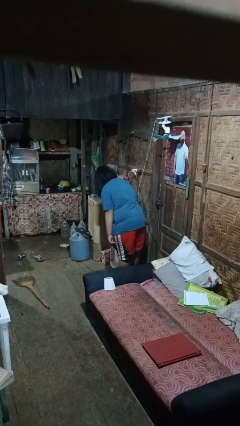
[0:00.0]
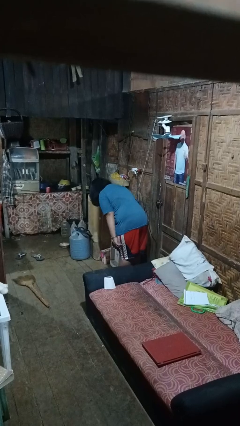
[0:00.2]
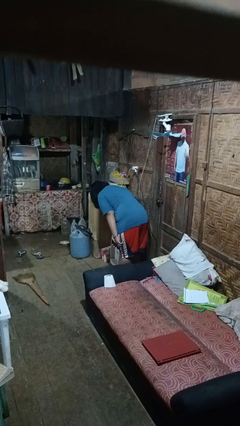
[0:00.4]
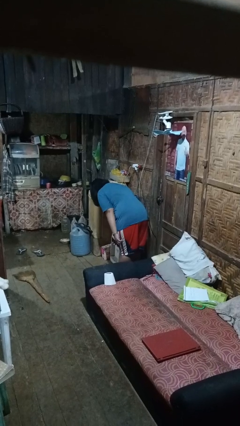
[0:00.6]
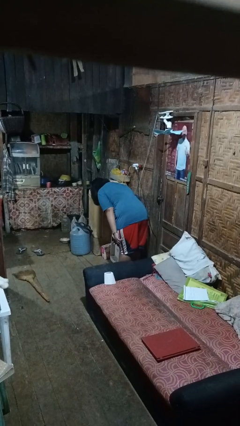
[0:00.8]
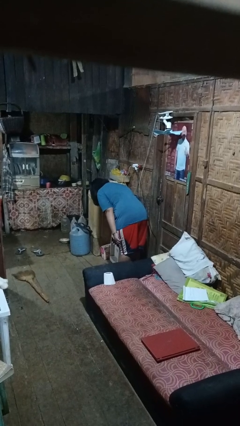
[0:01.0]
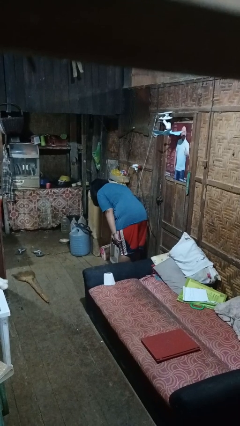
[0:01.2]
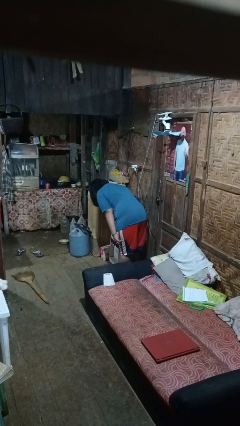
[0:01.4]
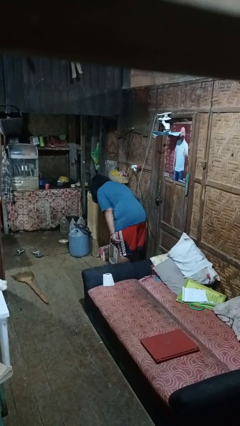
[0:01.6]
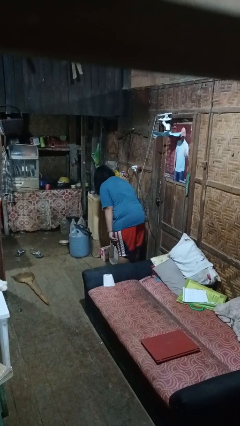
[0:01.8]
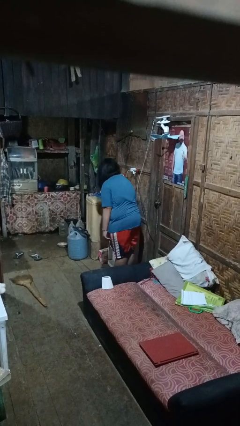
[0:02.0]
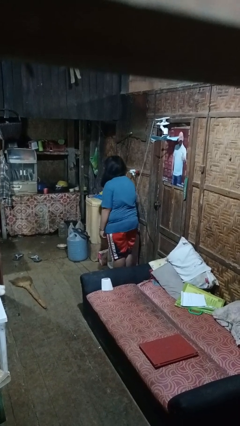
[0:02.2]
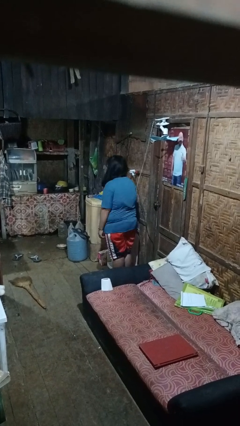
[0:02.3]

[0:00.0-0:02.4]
person bows

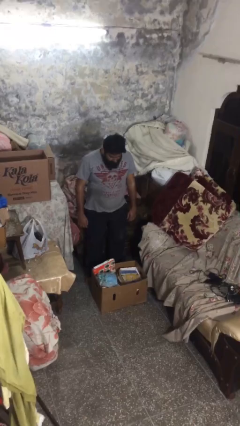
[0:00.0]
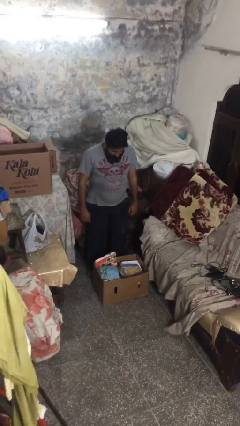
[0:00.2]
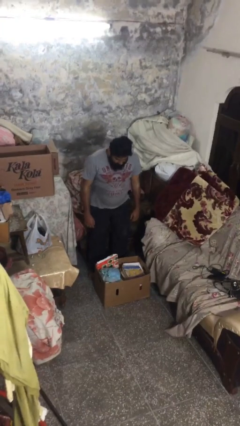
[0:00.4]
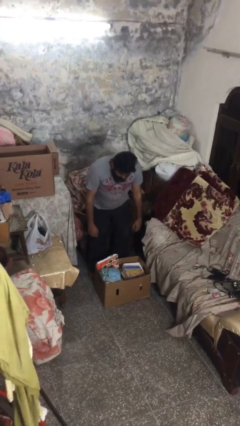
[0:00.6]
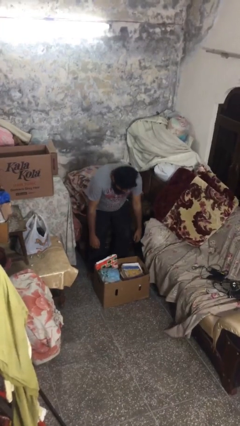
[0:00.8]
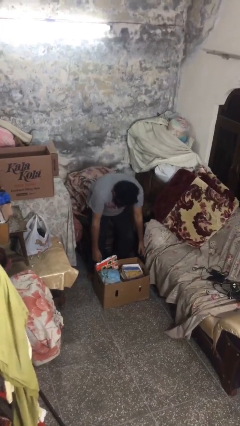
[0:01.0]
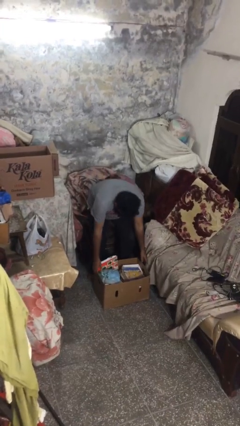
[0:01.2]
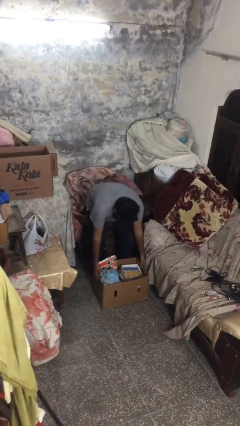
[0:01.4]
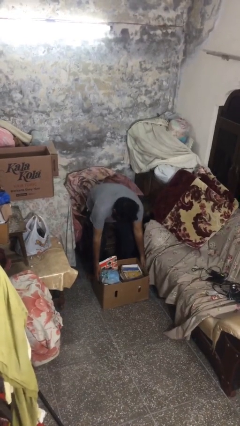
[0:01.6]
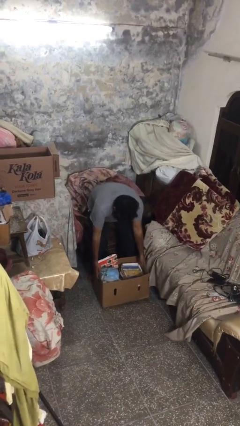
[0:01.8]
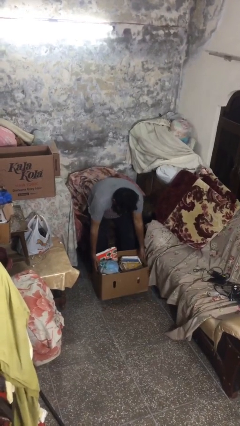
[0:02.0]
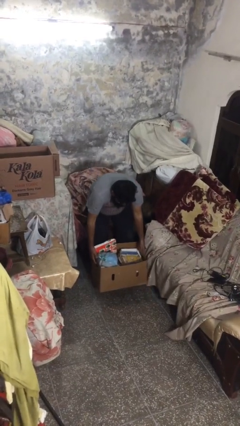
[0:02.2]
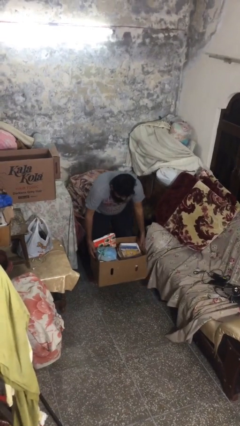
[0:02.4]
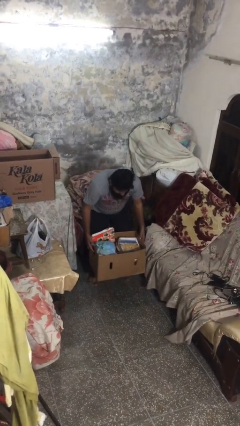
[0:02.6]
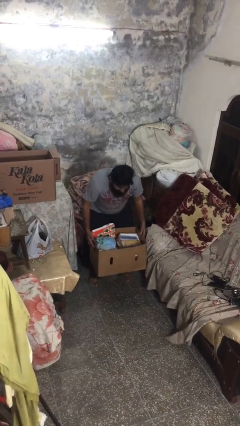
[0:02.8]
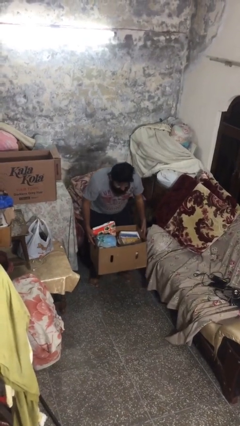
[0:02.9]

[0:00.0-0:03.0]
person picks up object from floor

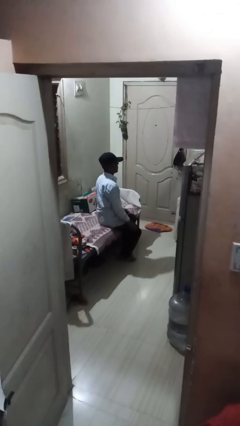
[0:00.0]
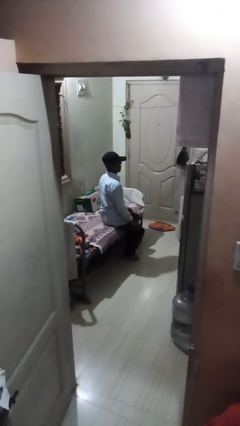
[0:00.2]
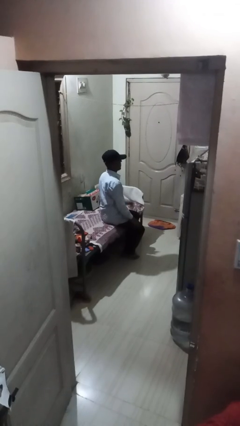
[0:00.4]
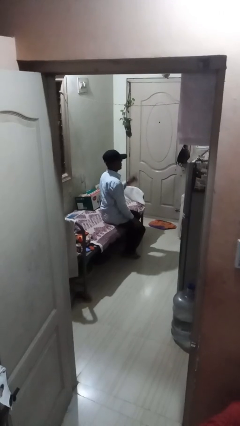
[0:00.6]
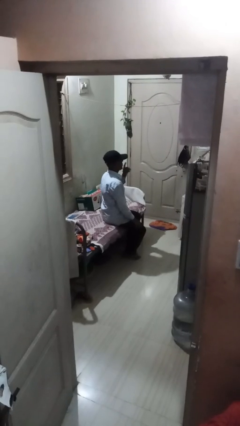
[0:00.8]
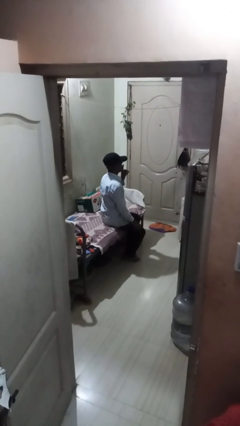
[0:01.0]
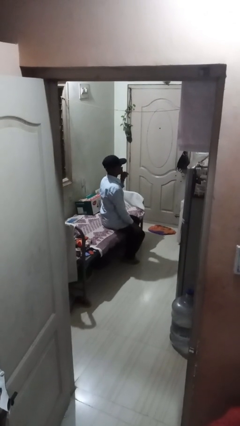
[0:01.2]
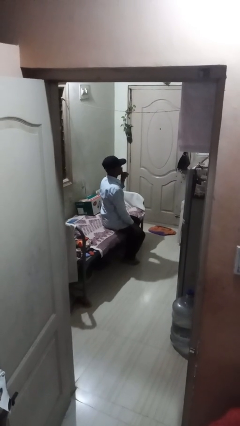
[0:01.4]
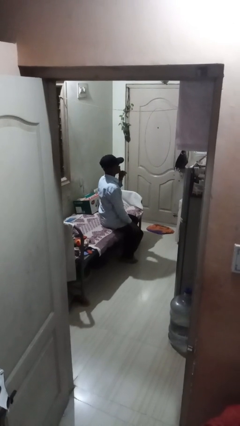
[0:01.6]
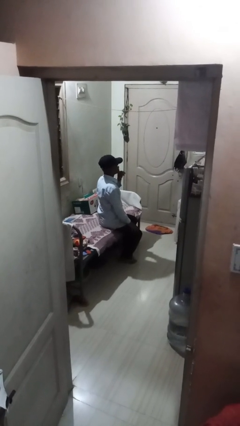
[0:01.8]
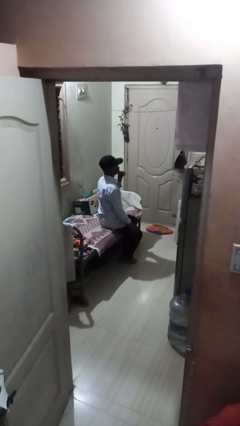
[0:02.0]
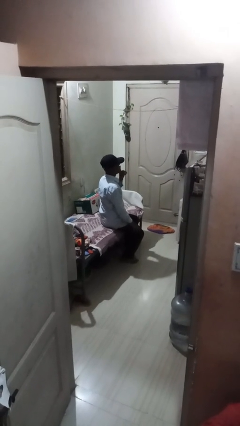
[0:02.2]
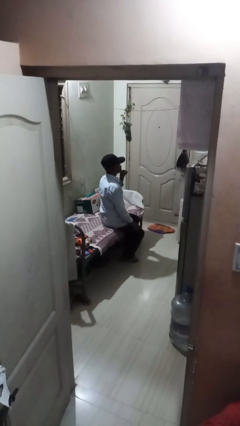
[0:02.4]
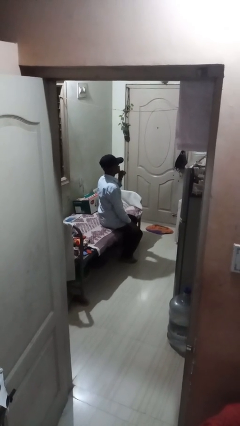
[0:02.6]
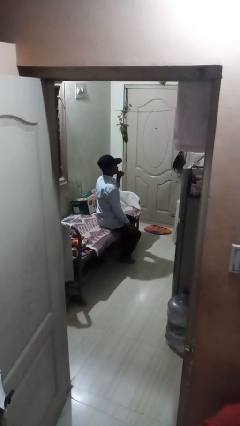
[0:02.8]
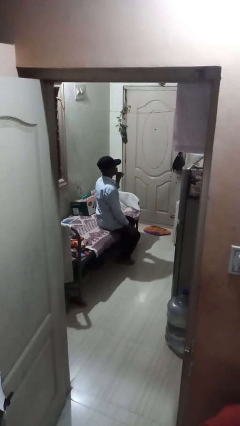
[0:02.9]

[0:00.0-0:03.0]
person gestures be quiet

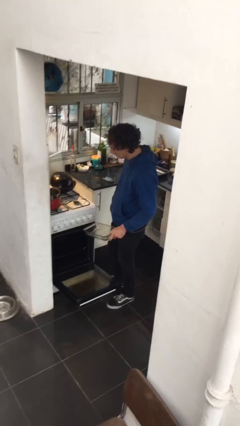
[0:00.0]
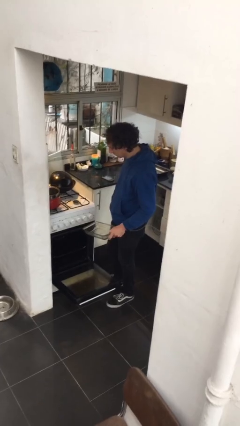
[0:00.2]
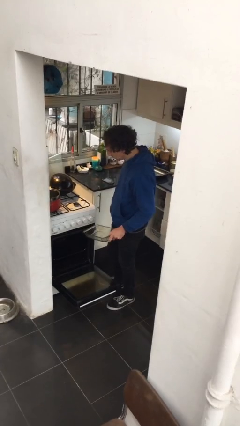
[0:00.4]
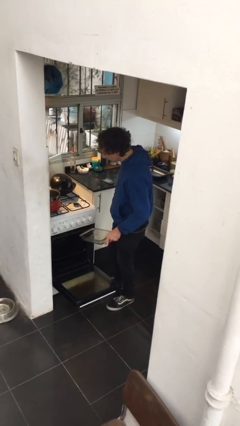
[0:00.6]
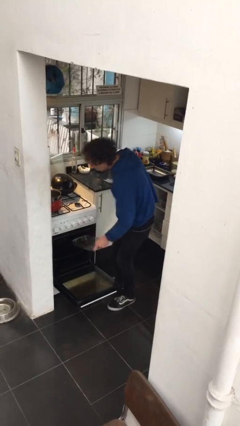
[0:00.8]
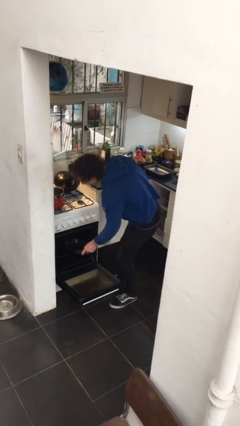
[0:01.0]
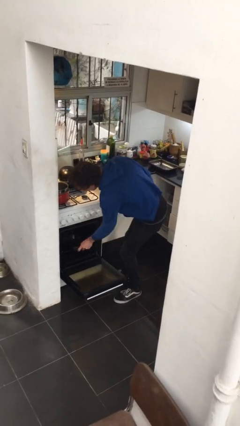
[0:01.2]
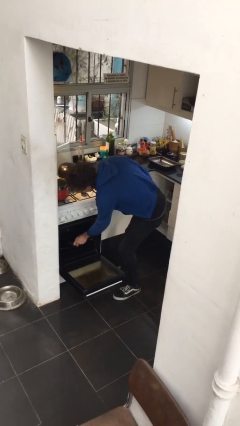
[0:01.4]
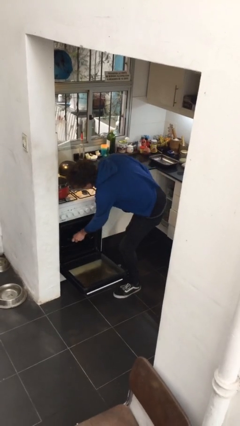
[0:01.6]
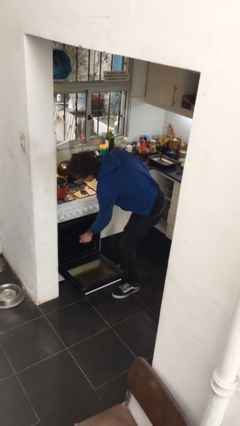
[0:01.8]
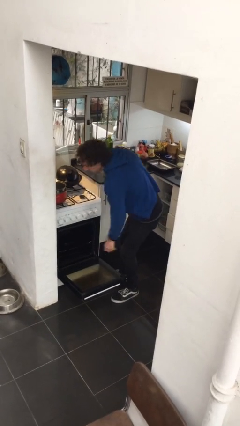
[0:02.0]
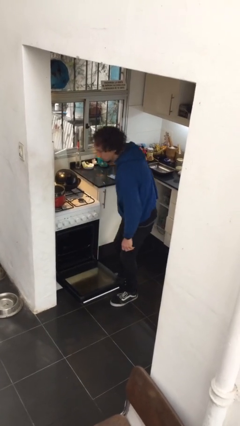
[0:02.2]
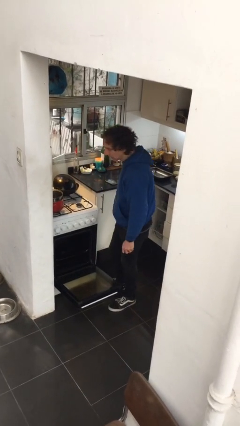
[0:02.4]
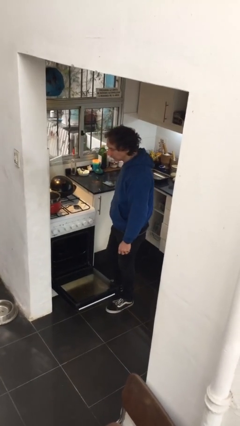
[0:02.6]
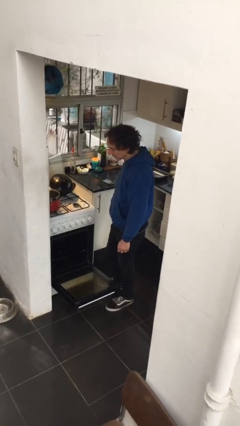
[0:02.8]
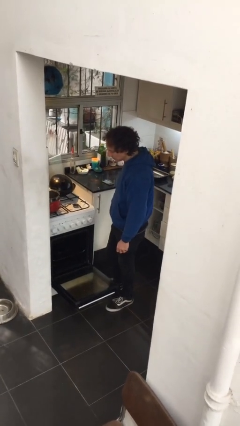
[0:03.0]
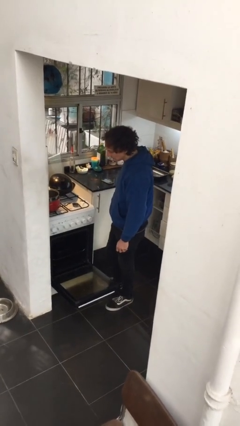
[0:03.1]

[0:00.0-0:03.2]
person puts object into oven

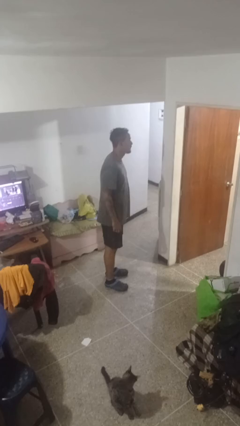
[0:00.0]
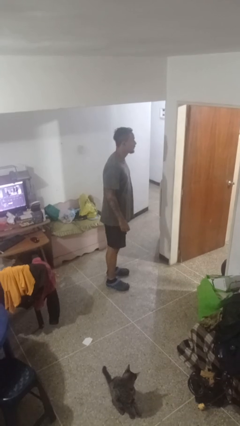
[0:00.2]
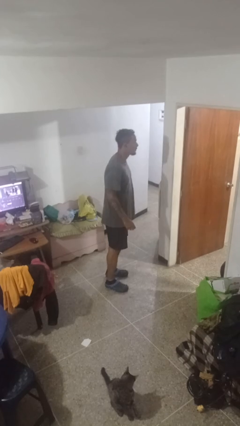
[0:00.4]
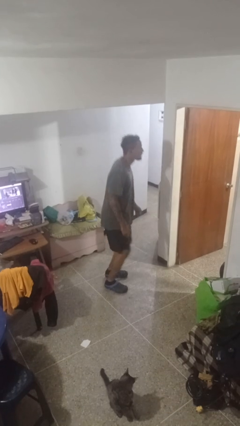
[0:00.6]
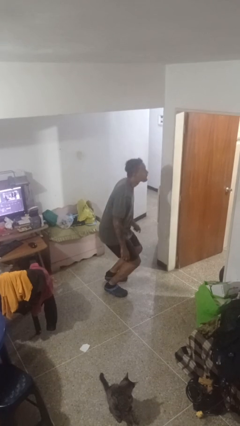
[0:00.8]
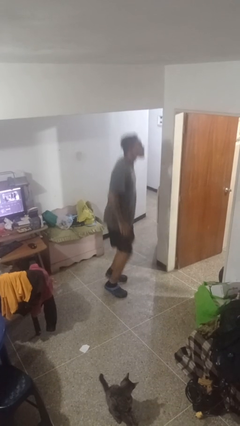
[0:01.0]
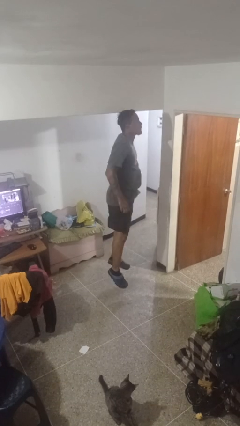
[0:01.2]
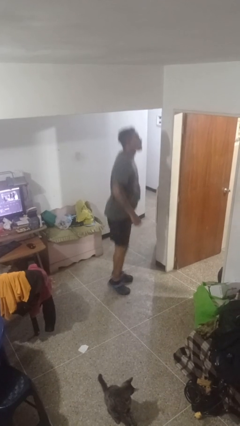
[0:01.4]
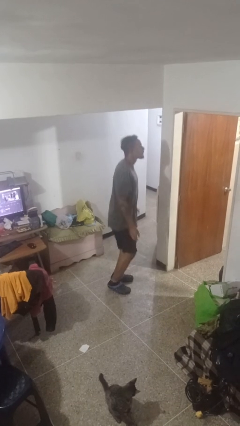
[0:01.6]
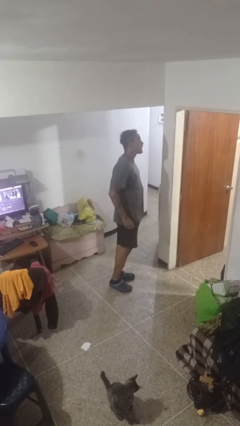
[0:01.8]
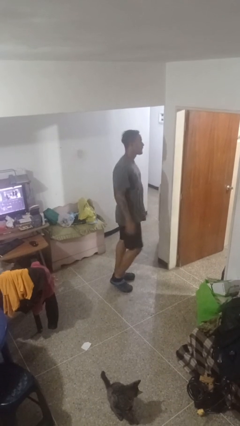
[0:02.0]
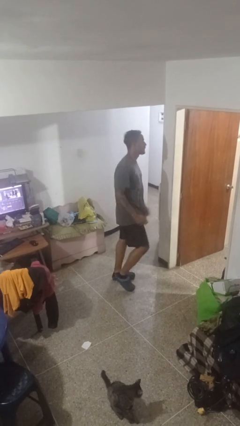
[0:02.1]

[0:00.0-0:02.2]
person jumps

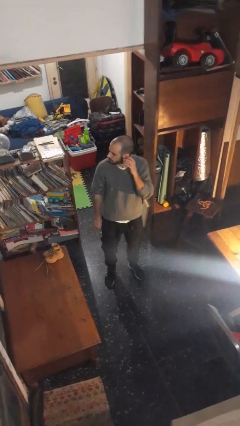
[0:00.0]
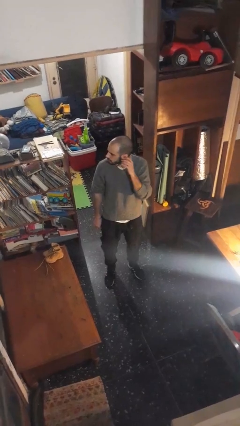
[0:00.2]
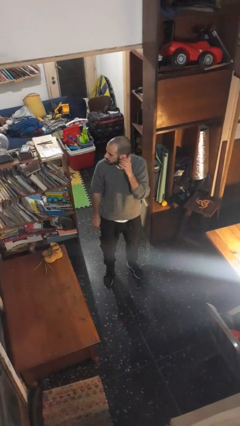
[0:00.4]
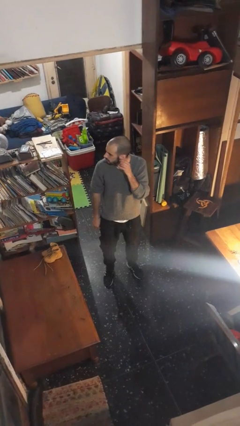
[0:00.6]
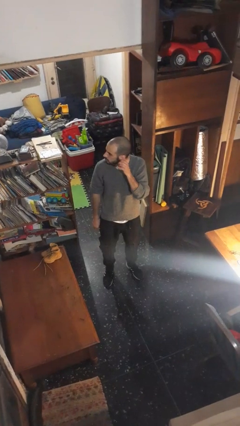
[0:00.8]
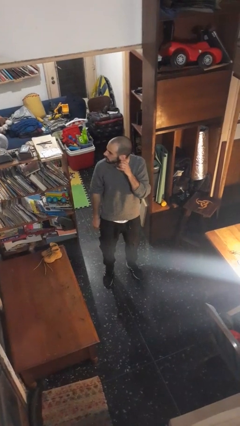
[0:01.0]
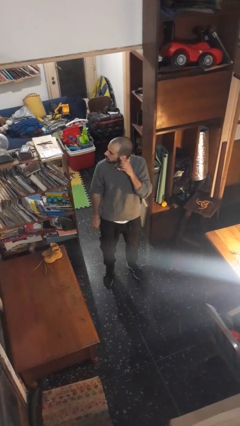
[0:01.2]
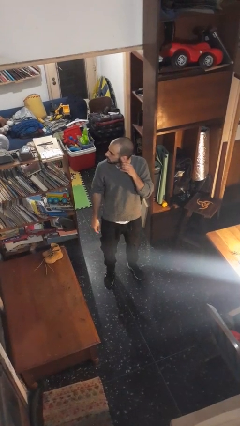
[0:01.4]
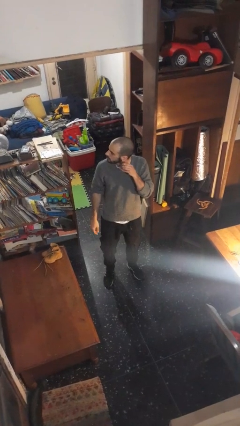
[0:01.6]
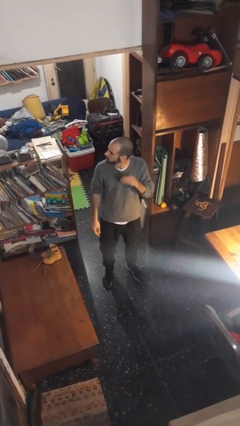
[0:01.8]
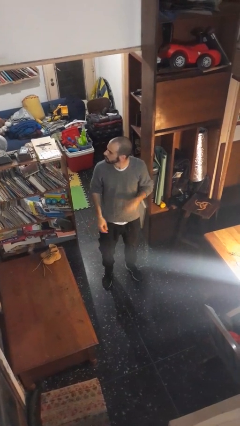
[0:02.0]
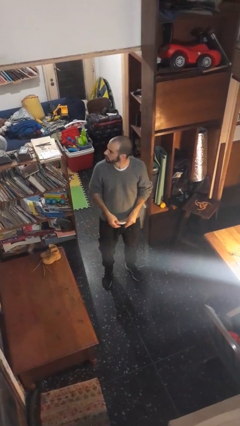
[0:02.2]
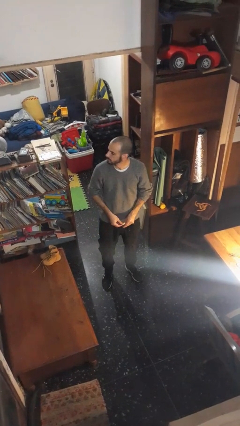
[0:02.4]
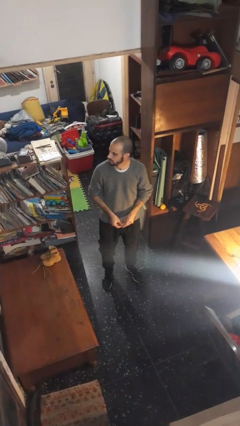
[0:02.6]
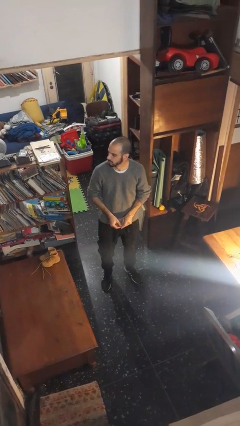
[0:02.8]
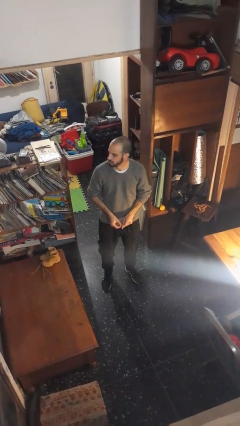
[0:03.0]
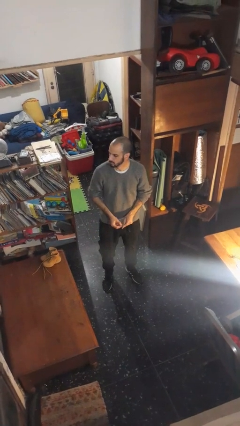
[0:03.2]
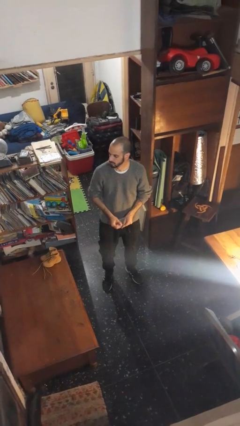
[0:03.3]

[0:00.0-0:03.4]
person takes off earrings
